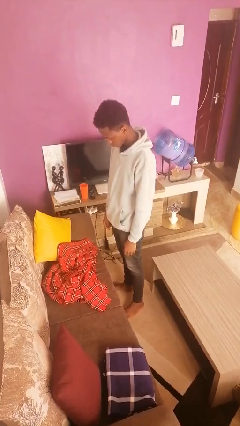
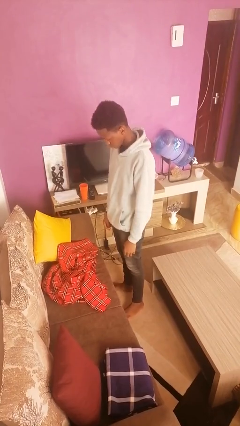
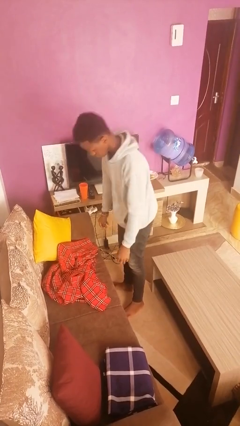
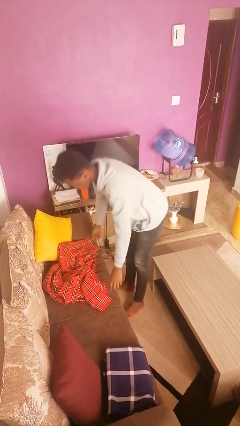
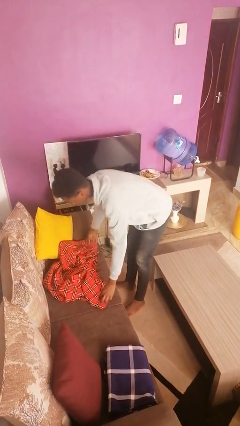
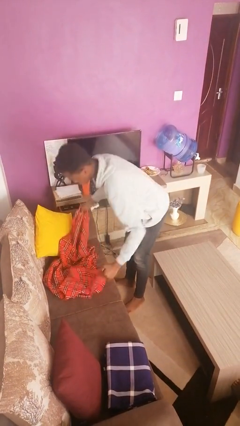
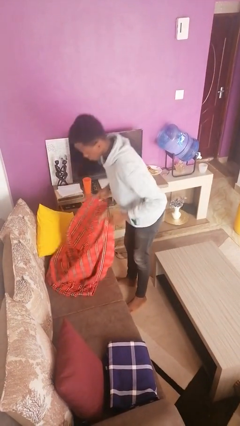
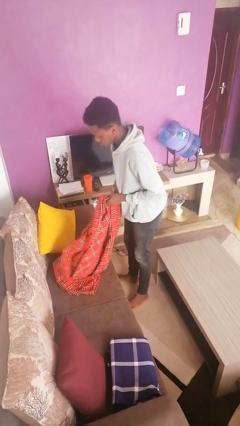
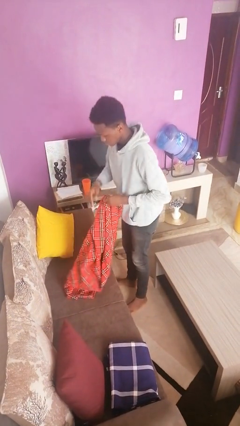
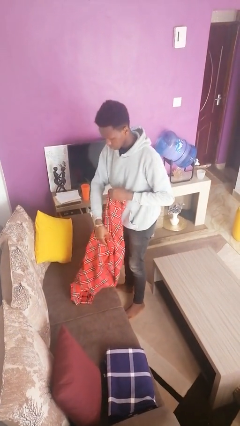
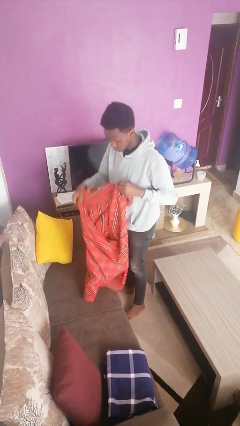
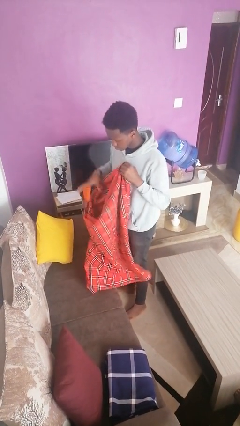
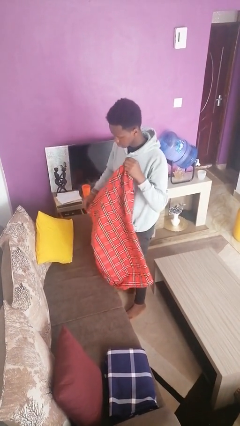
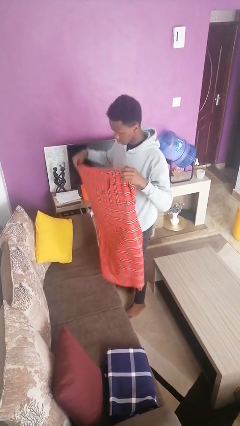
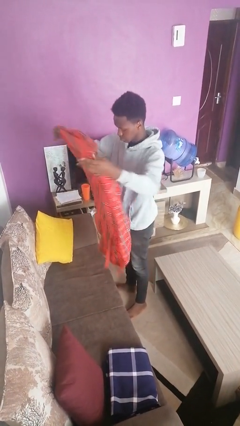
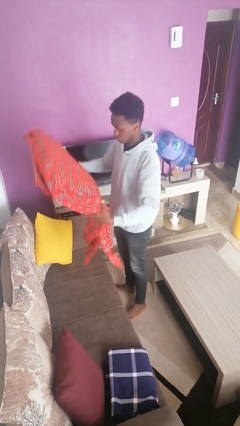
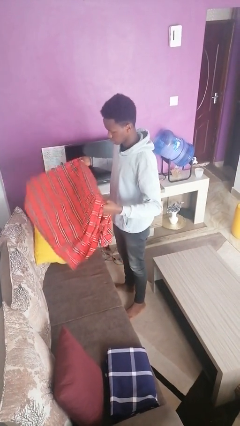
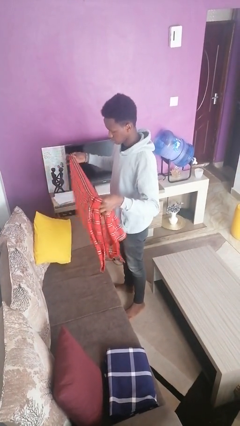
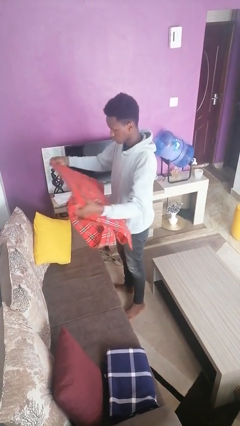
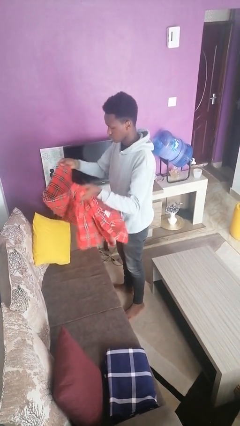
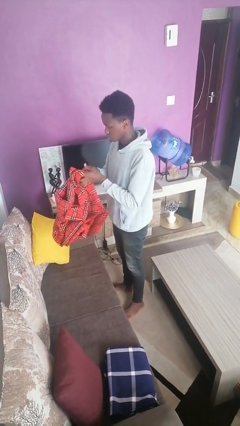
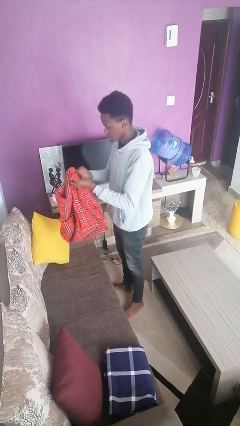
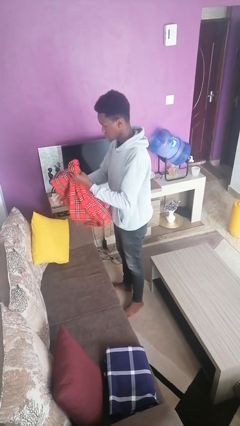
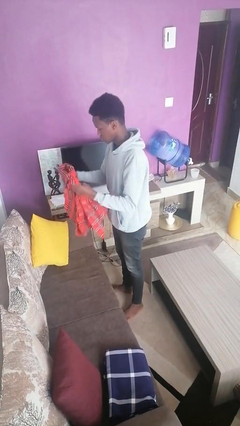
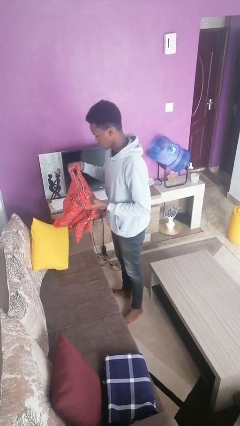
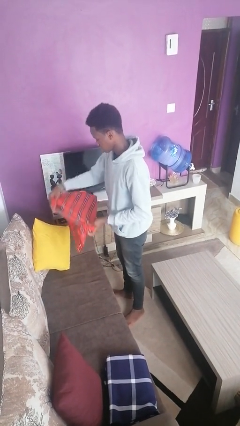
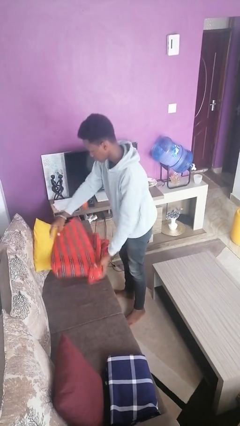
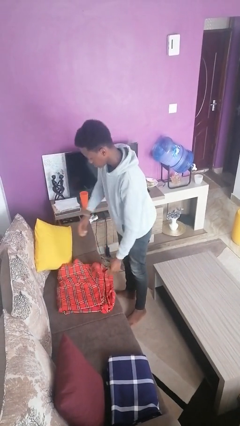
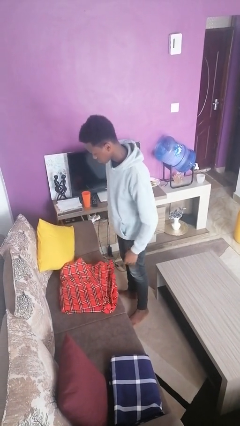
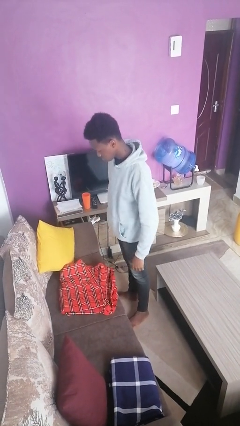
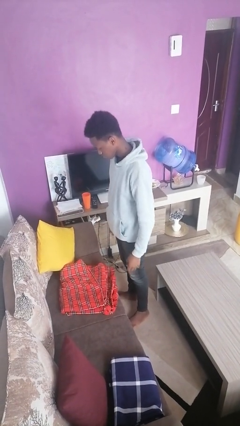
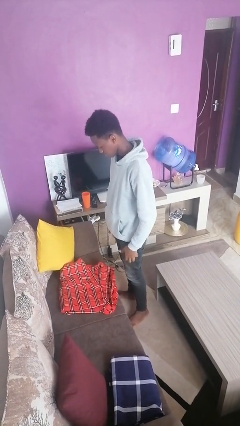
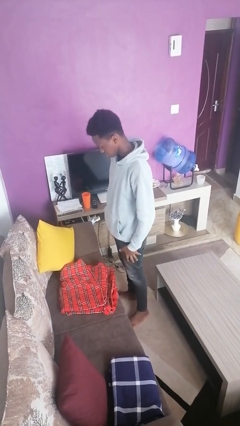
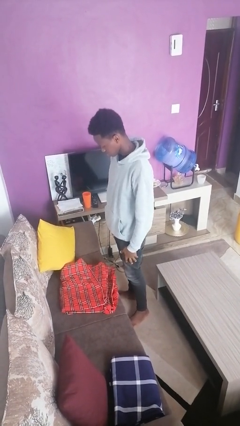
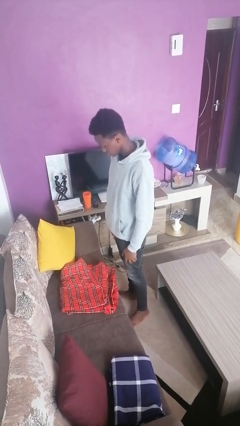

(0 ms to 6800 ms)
person folds blanket

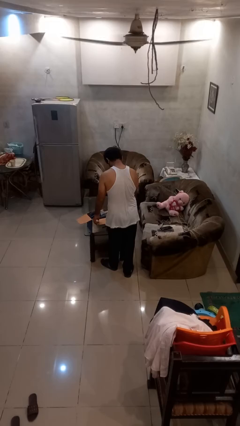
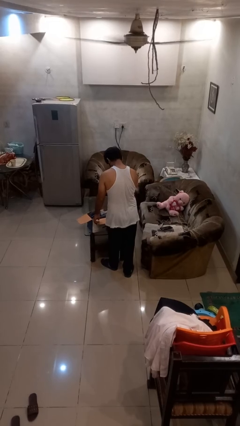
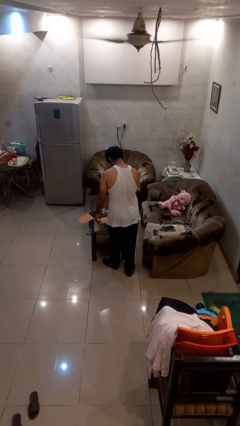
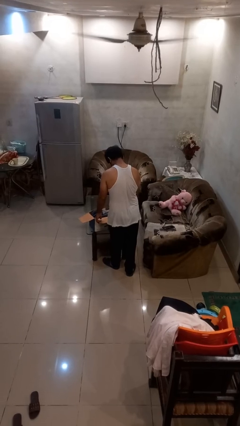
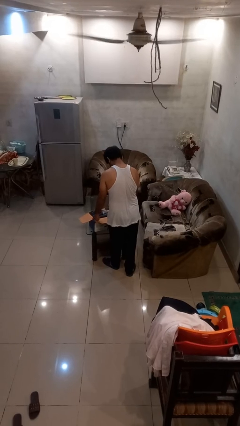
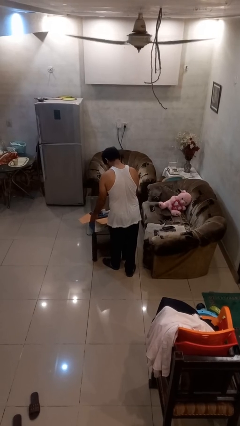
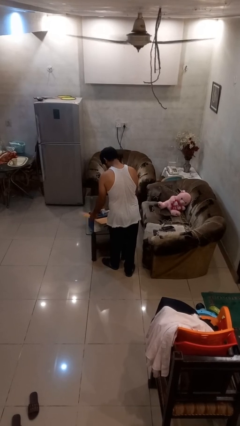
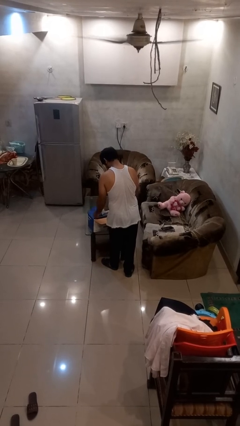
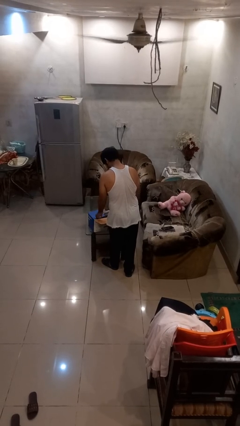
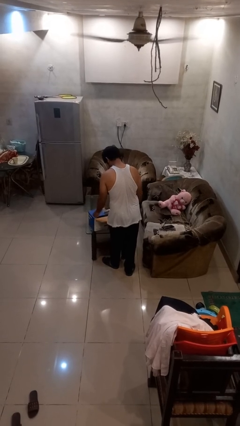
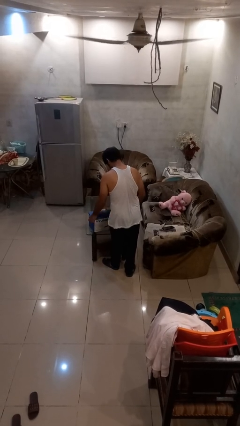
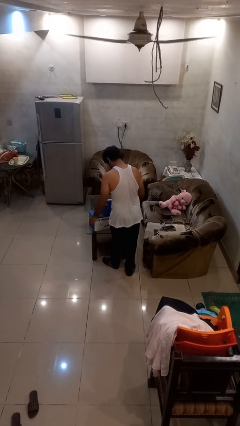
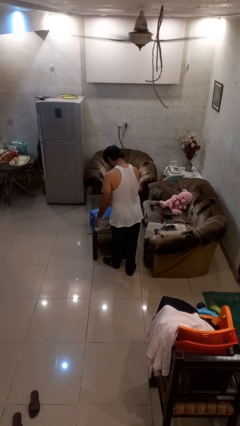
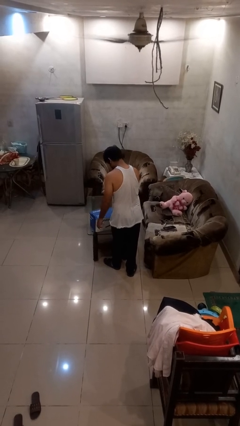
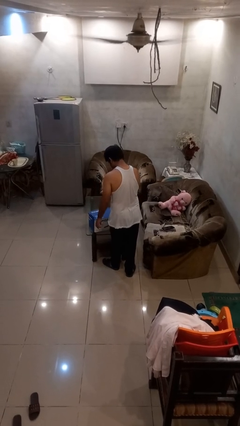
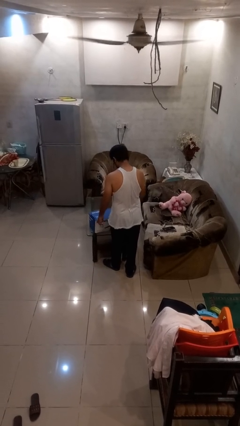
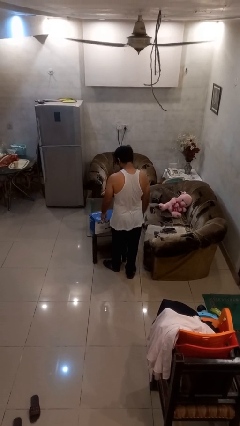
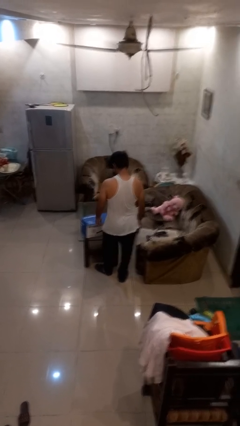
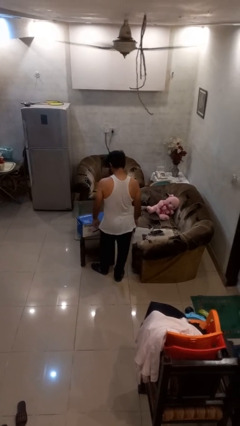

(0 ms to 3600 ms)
person closes box

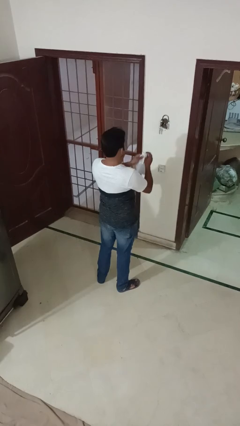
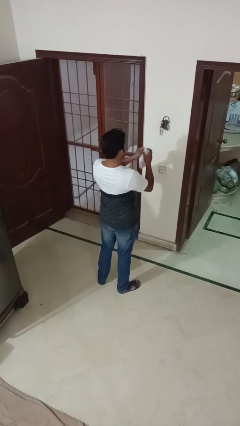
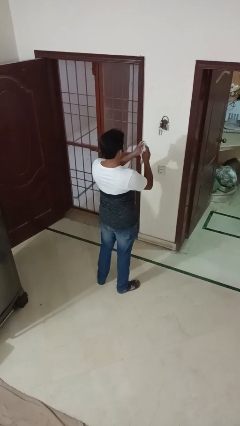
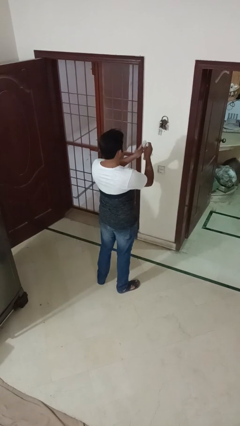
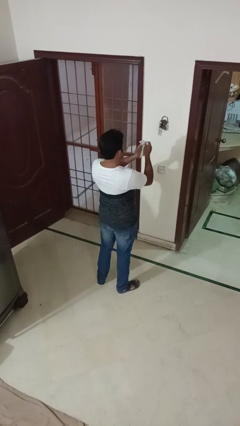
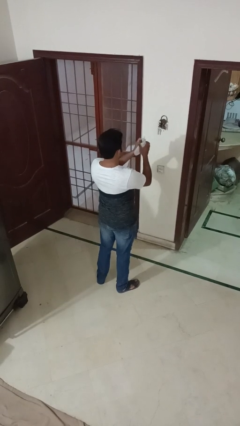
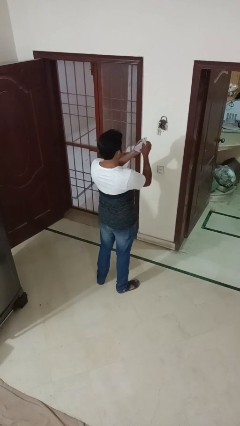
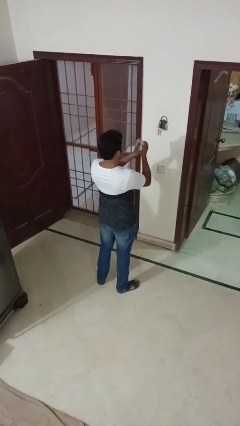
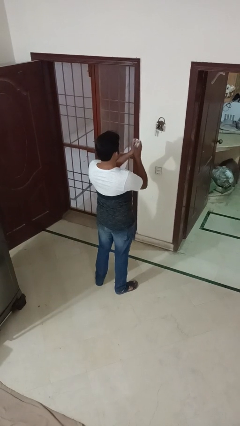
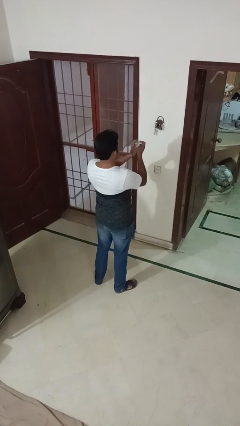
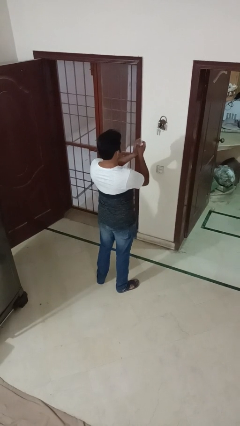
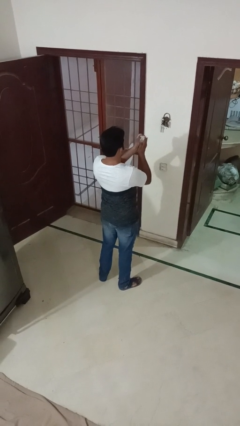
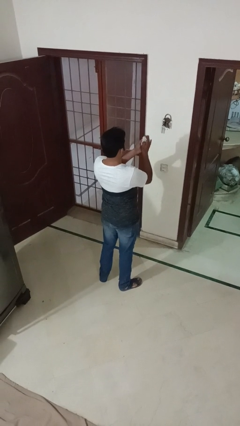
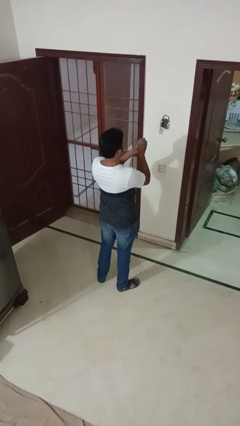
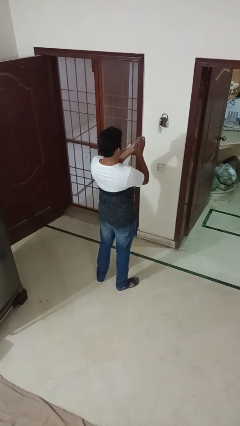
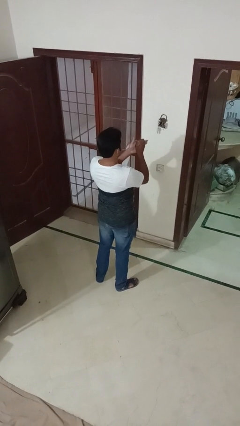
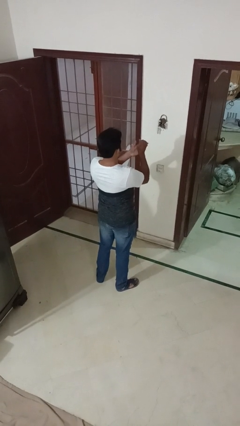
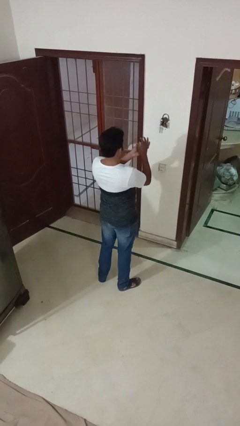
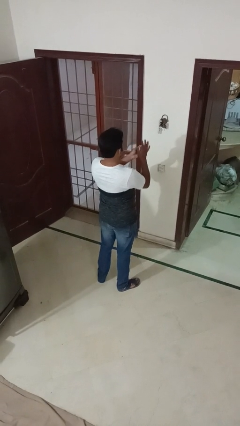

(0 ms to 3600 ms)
person crumples paper

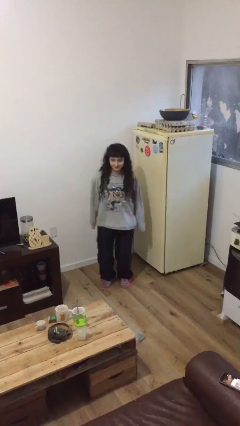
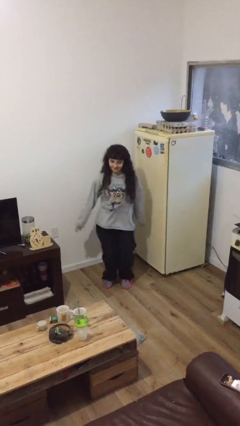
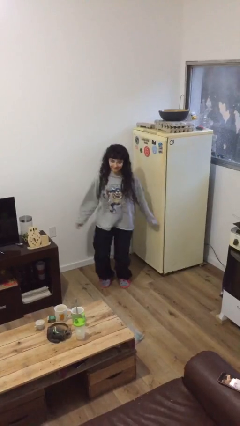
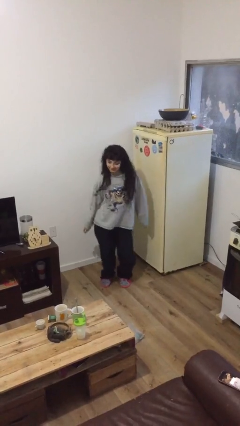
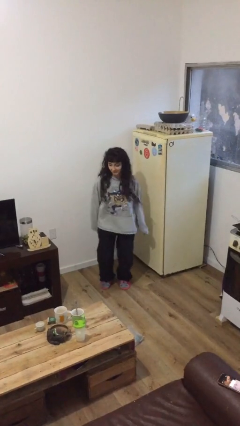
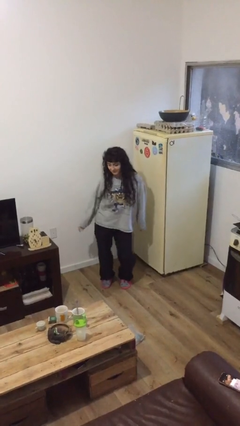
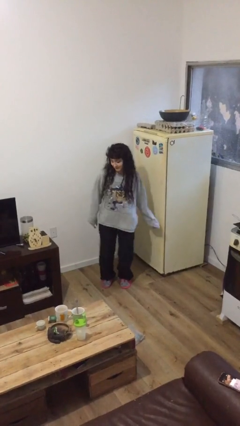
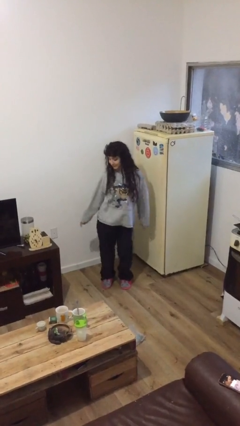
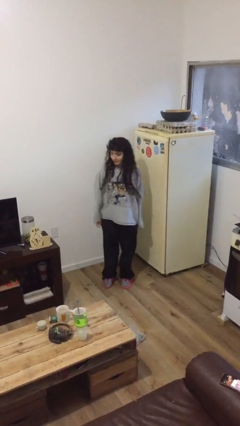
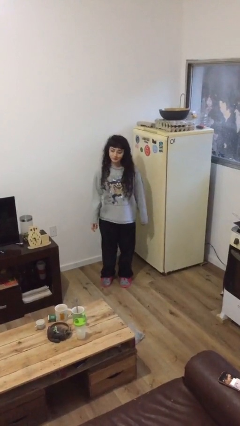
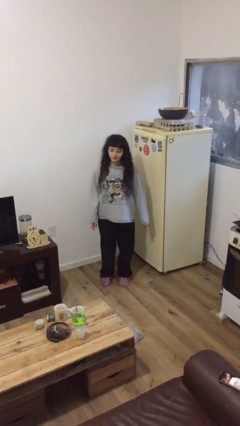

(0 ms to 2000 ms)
person wiggles hips

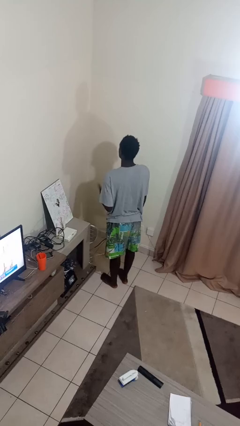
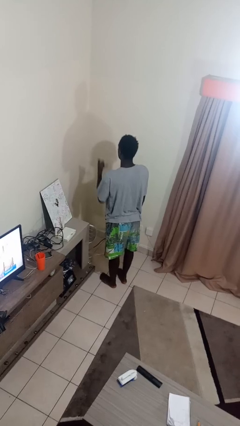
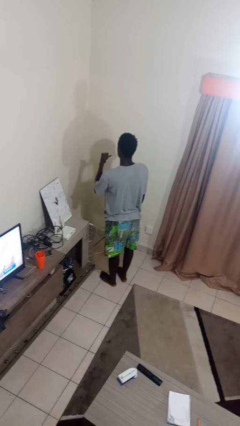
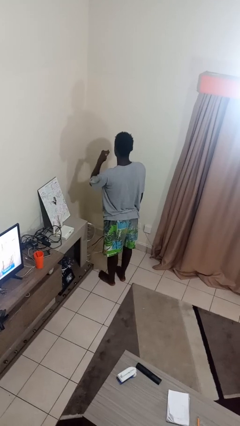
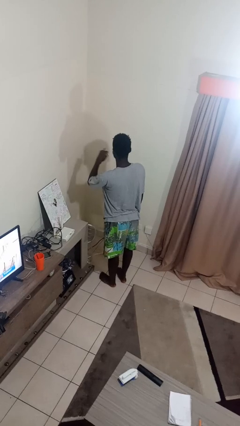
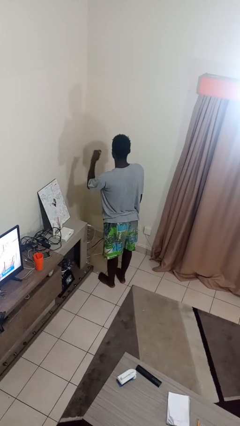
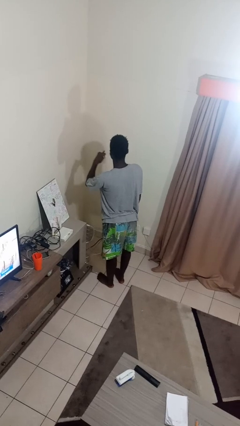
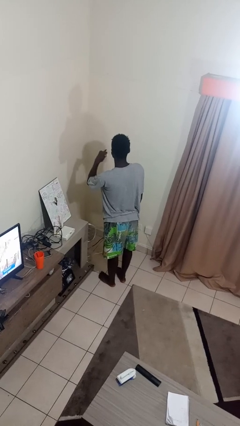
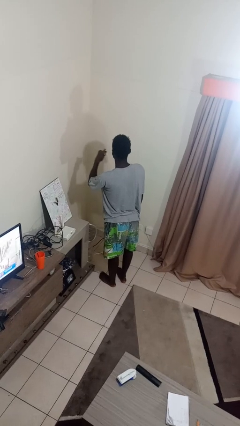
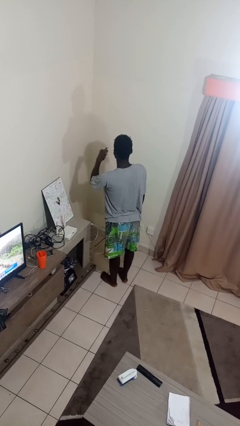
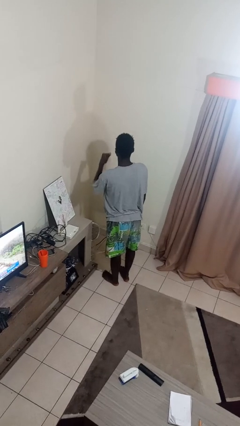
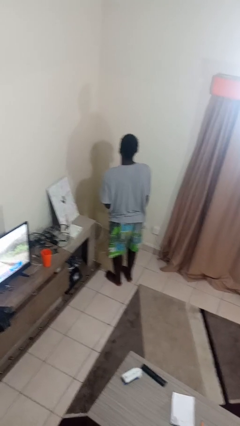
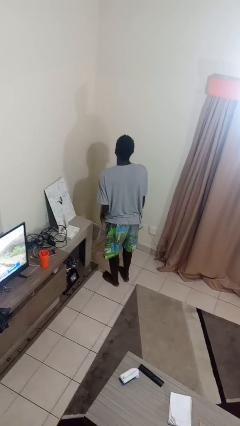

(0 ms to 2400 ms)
person gestures call me
